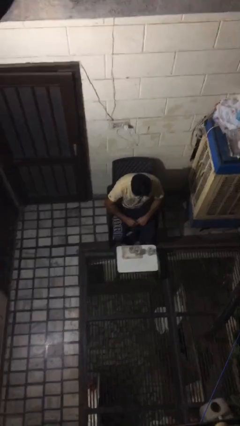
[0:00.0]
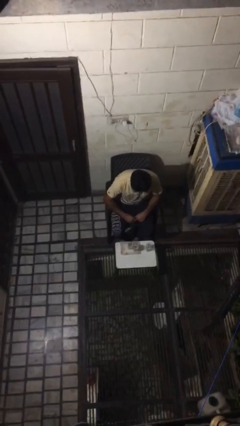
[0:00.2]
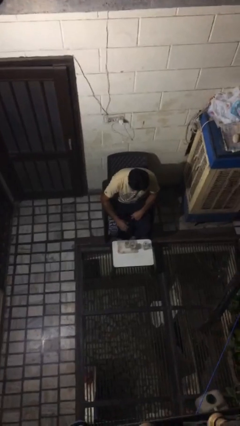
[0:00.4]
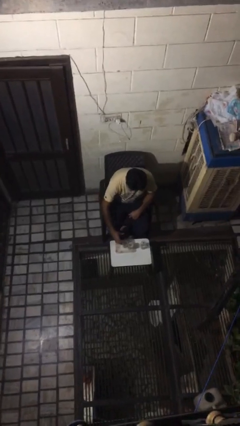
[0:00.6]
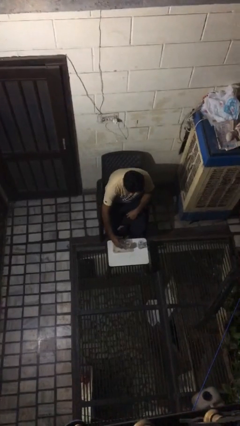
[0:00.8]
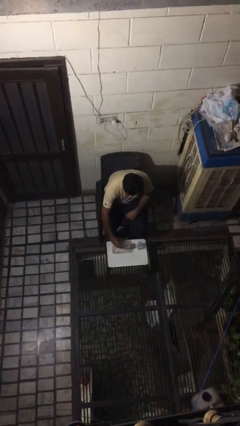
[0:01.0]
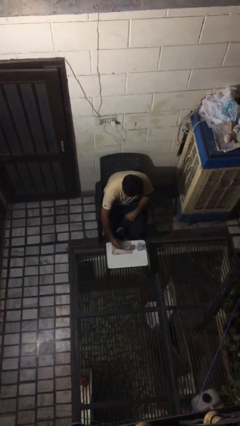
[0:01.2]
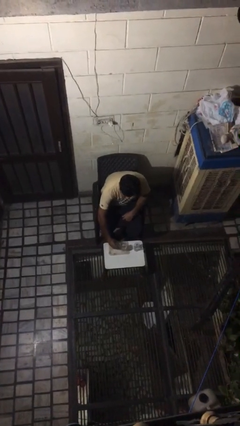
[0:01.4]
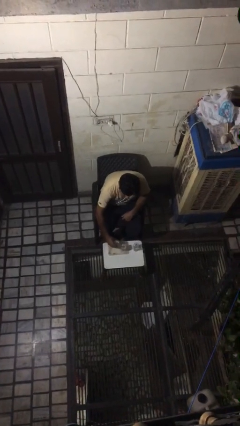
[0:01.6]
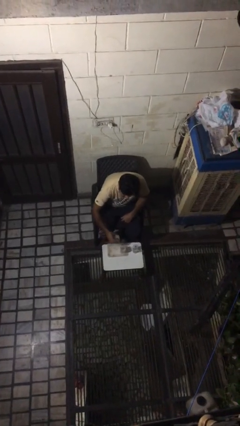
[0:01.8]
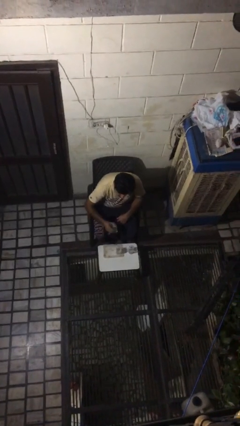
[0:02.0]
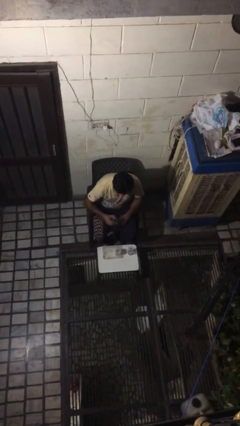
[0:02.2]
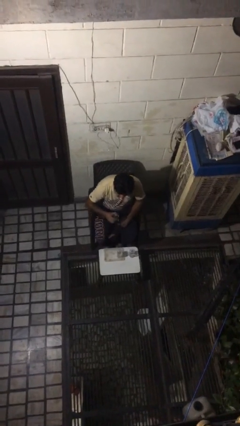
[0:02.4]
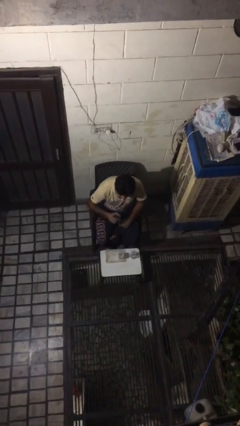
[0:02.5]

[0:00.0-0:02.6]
person picks up object from table

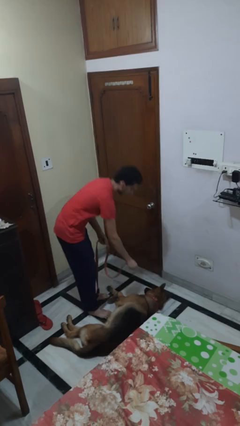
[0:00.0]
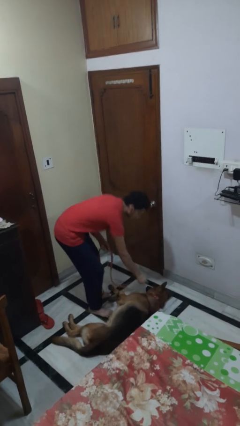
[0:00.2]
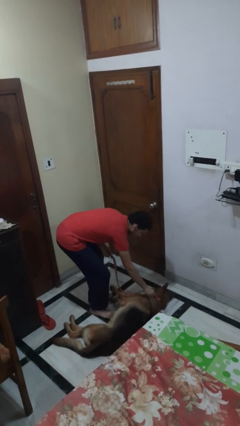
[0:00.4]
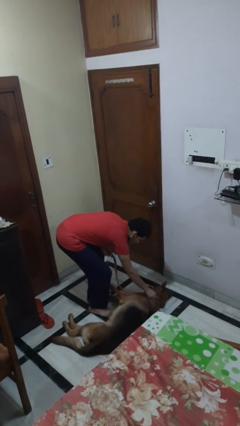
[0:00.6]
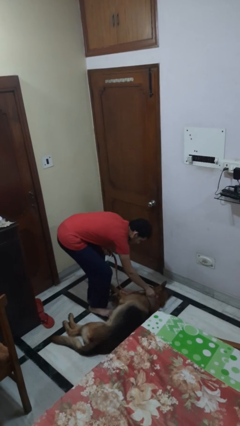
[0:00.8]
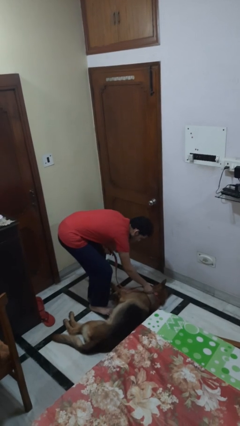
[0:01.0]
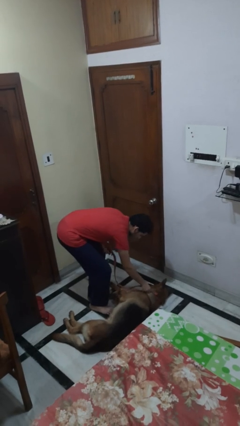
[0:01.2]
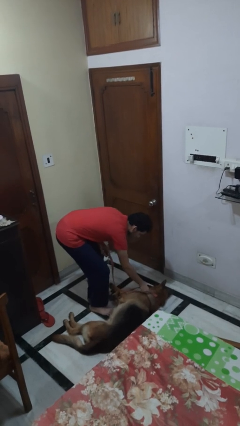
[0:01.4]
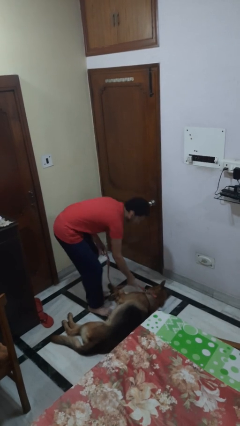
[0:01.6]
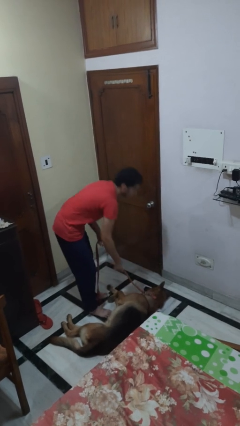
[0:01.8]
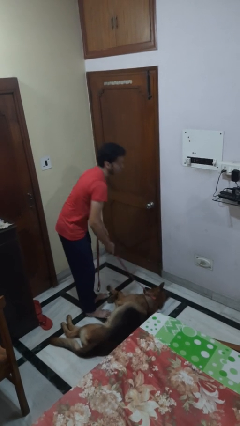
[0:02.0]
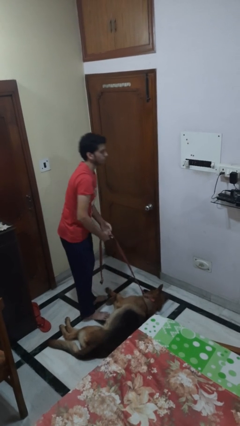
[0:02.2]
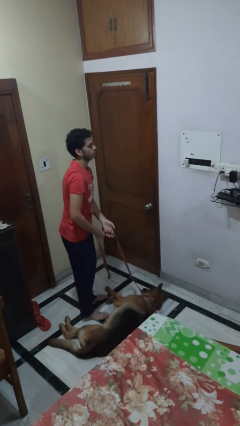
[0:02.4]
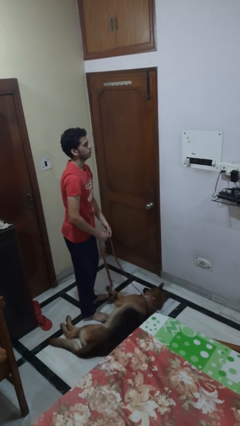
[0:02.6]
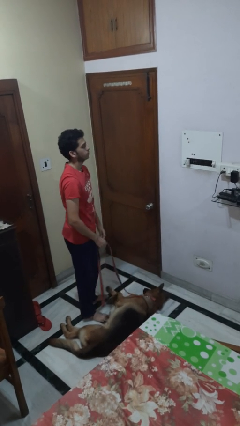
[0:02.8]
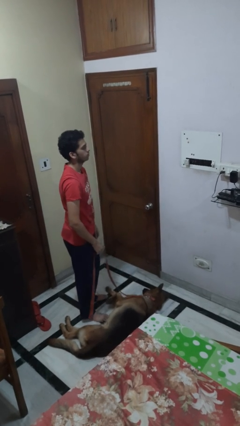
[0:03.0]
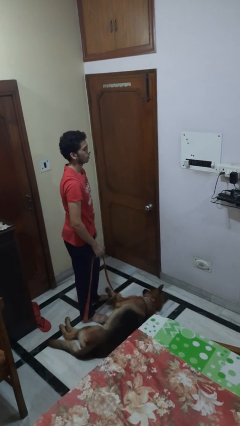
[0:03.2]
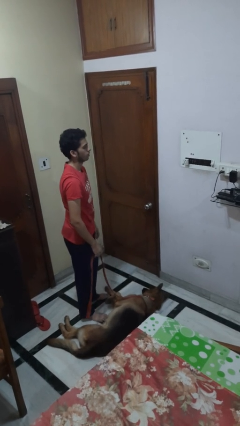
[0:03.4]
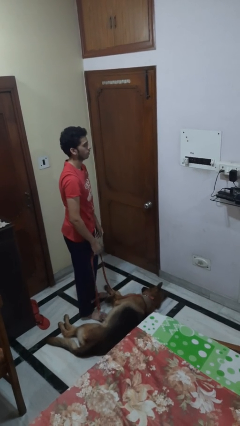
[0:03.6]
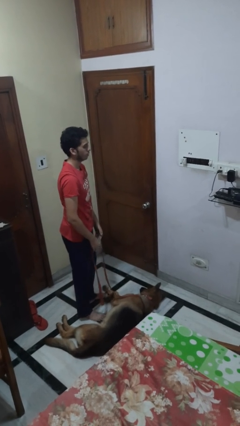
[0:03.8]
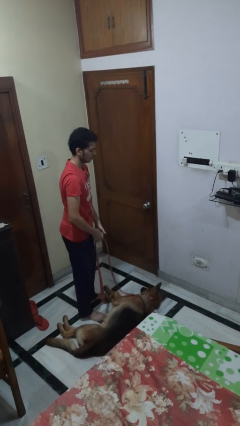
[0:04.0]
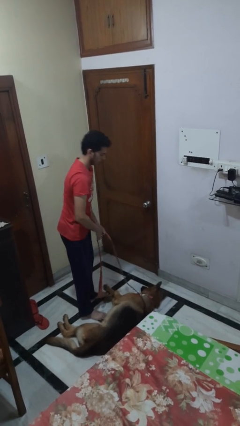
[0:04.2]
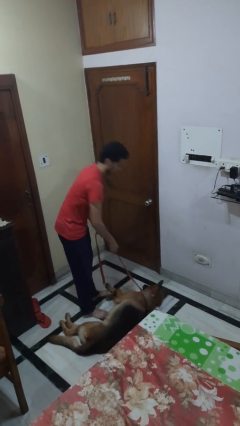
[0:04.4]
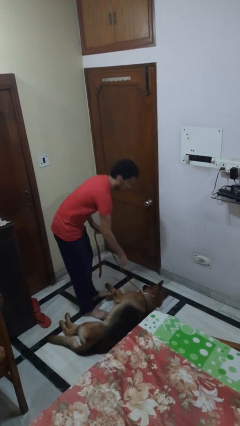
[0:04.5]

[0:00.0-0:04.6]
person attaches leash to dog

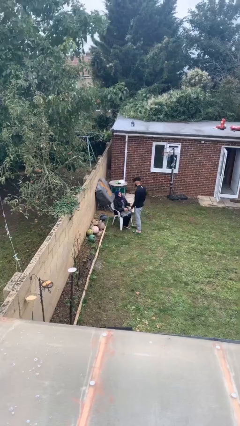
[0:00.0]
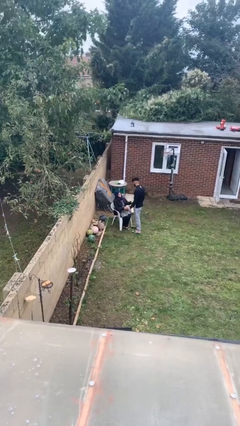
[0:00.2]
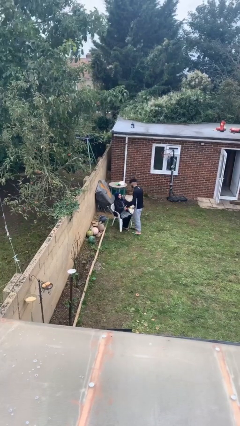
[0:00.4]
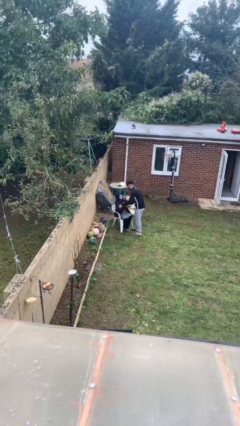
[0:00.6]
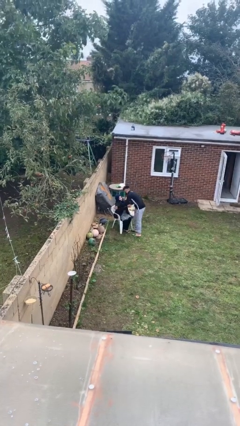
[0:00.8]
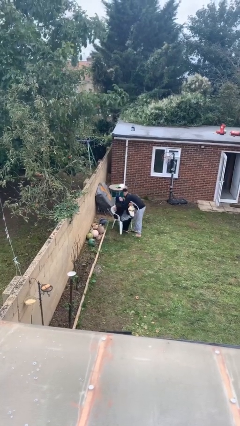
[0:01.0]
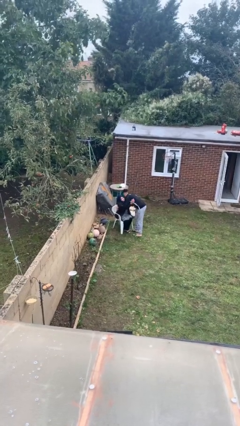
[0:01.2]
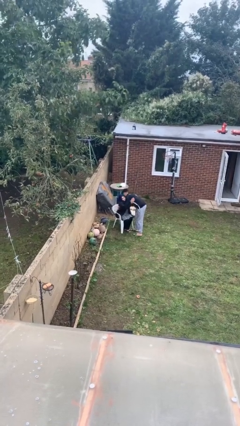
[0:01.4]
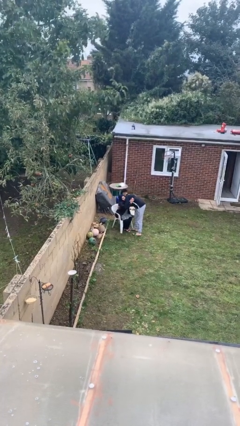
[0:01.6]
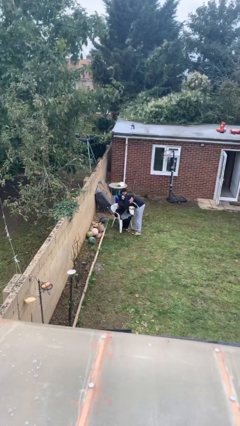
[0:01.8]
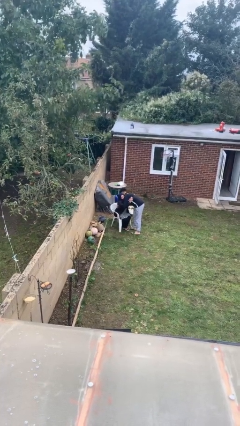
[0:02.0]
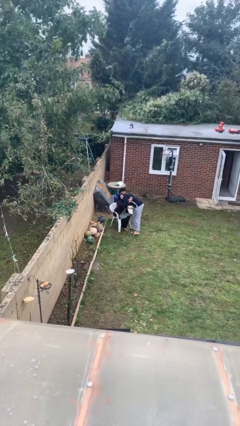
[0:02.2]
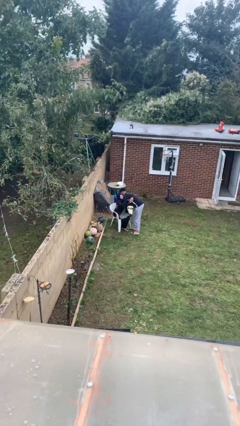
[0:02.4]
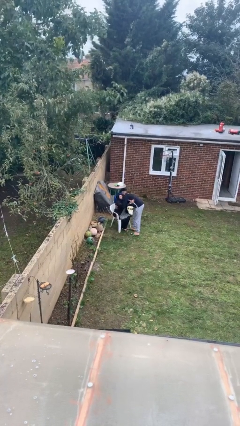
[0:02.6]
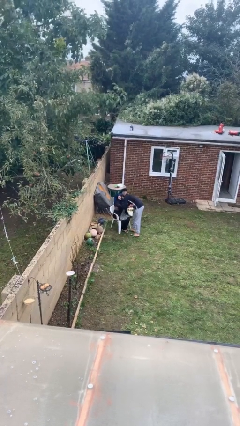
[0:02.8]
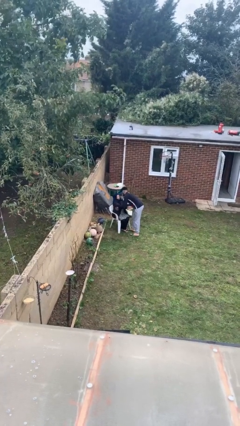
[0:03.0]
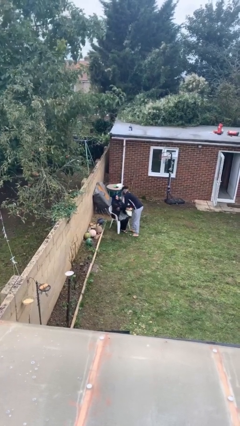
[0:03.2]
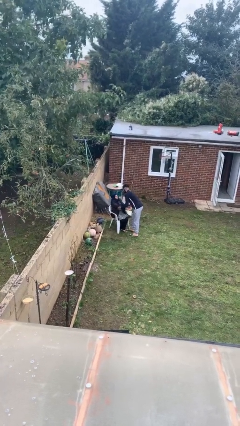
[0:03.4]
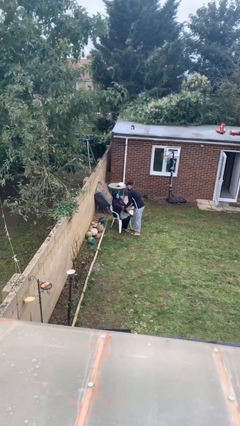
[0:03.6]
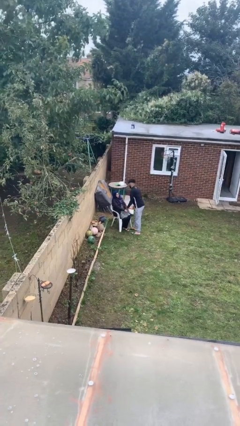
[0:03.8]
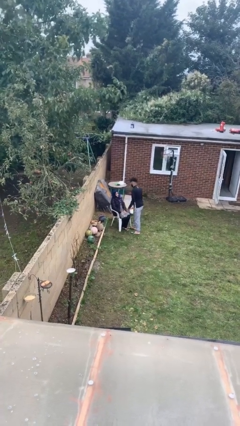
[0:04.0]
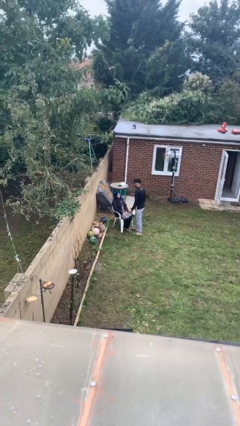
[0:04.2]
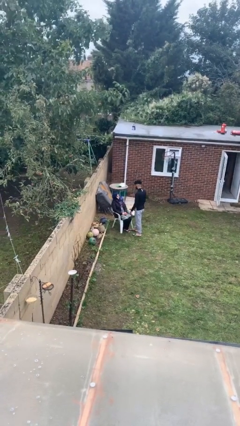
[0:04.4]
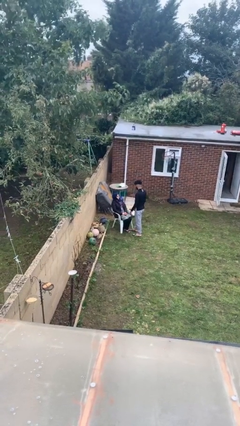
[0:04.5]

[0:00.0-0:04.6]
person embraces person

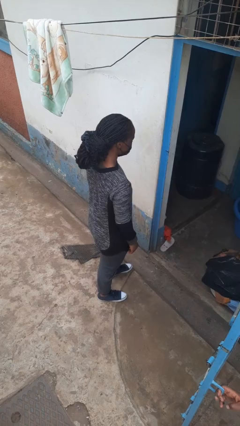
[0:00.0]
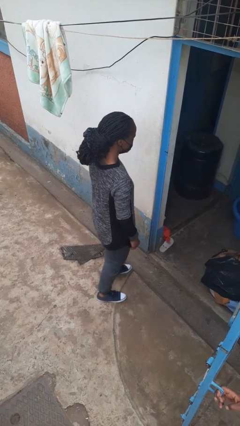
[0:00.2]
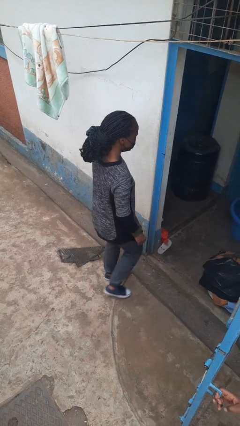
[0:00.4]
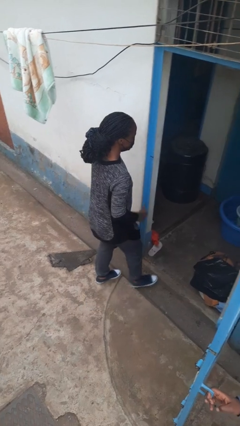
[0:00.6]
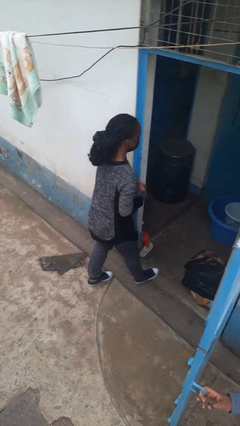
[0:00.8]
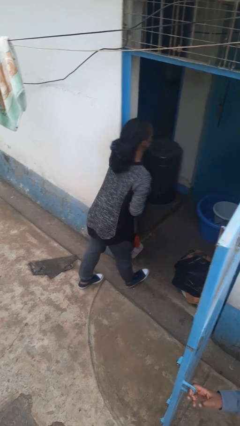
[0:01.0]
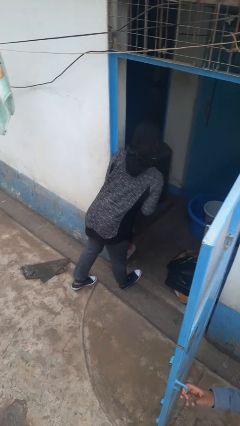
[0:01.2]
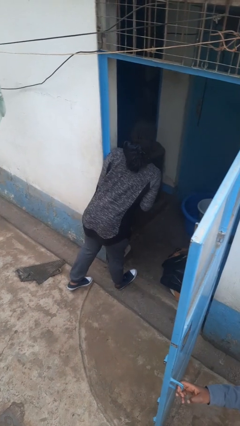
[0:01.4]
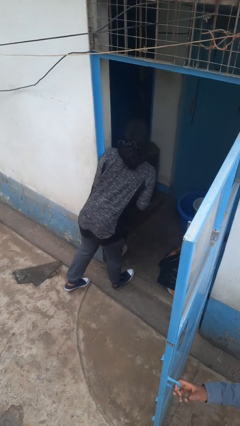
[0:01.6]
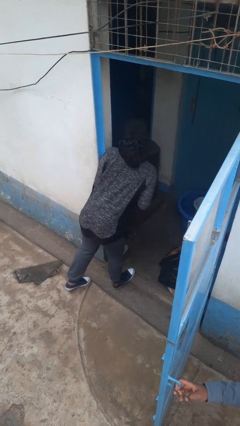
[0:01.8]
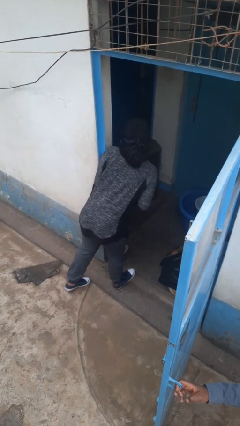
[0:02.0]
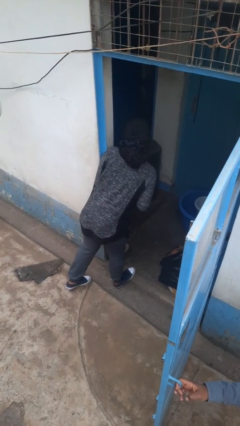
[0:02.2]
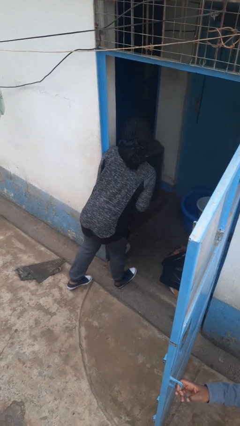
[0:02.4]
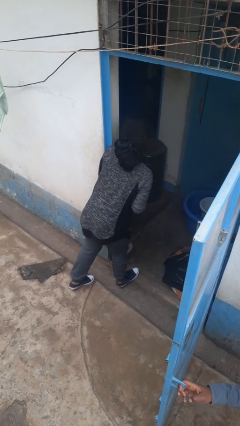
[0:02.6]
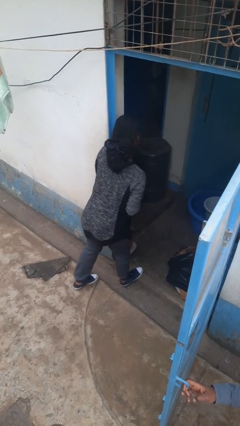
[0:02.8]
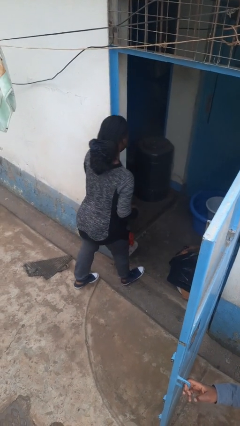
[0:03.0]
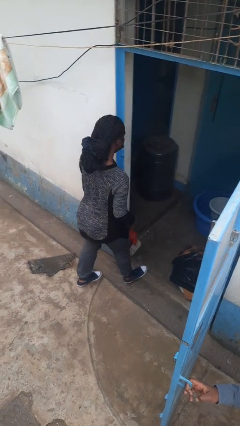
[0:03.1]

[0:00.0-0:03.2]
person bumps into wall

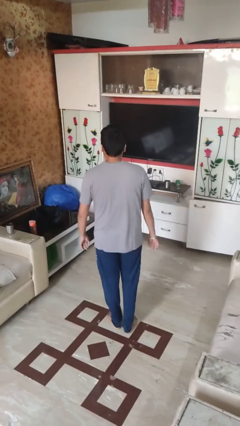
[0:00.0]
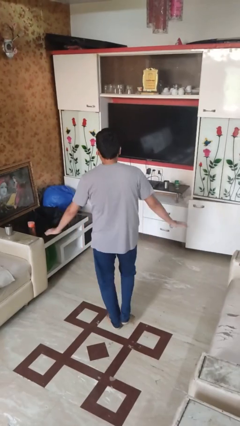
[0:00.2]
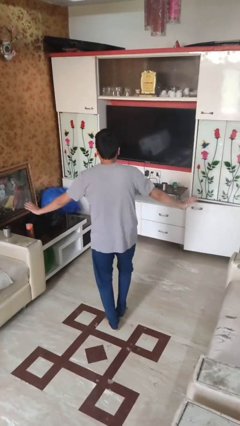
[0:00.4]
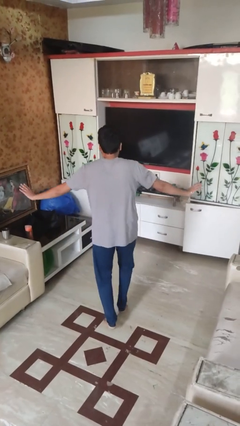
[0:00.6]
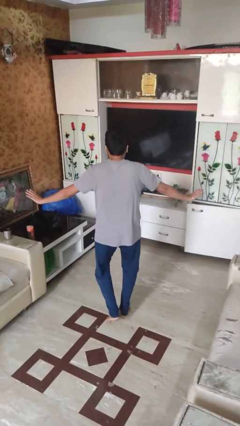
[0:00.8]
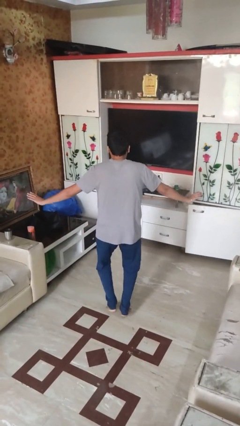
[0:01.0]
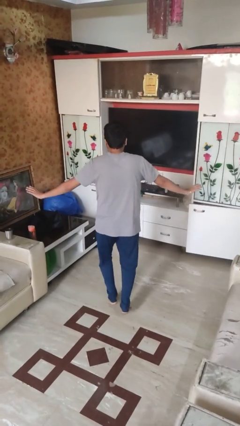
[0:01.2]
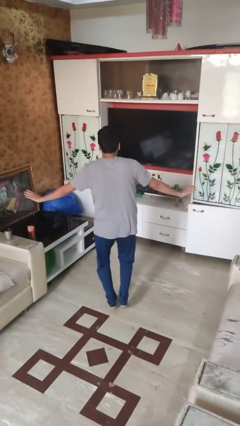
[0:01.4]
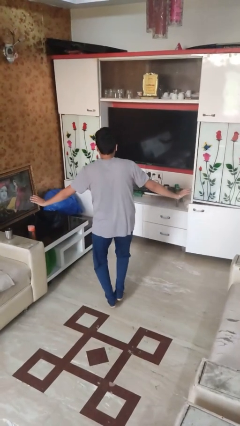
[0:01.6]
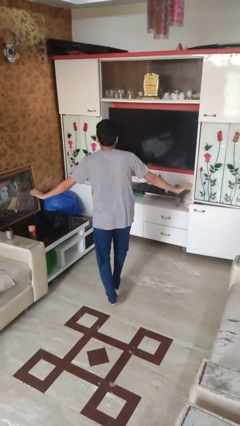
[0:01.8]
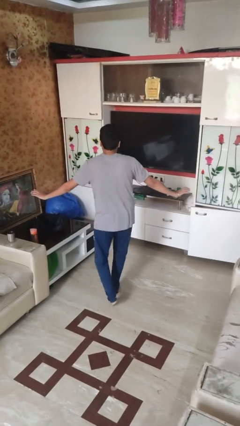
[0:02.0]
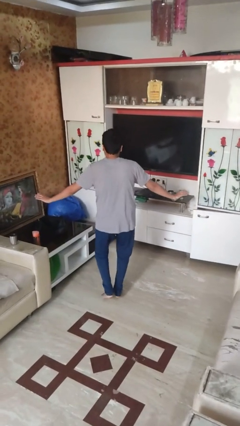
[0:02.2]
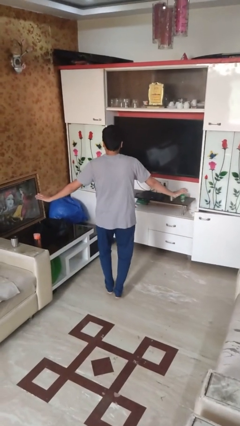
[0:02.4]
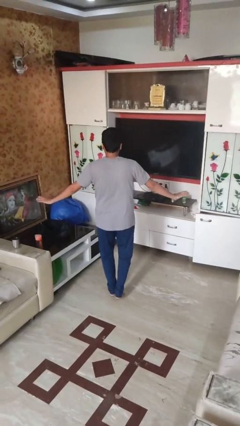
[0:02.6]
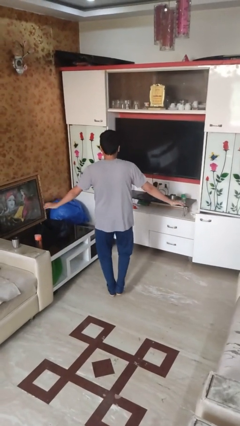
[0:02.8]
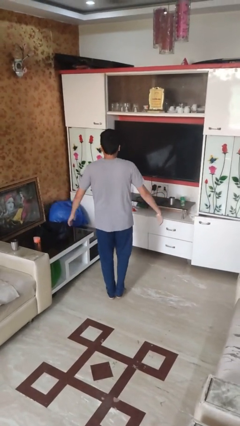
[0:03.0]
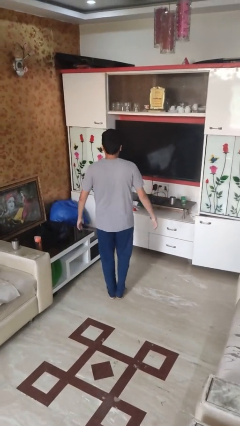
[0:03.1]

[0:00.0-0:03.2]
person walks tiptoe
